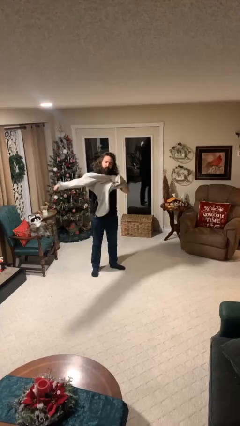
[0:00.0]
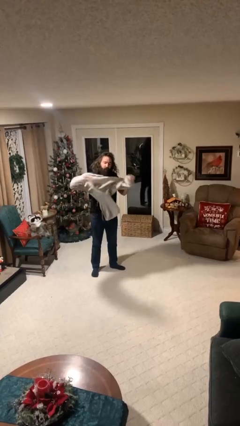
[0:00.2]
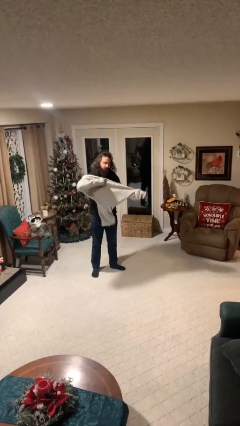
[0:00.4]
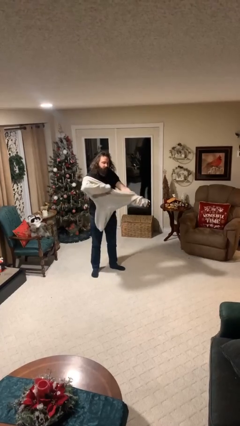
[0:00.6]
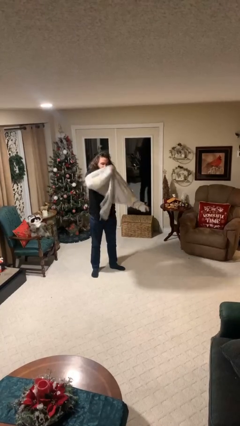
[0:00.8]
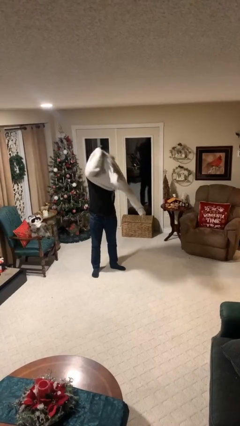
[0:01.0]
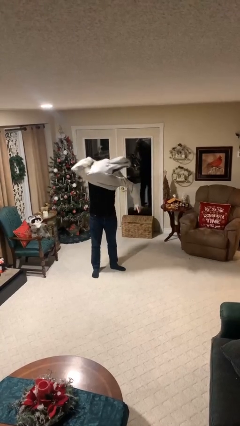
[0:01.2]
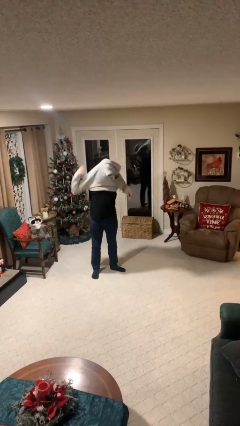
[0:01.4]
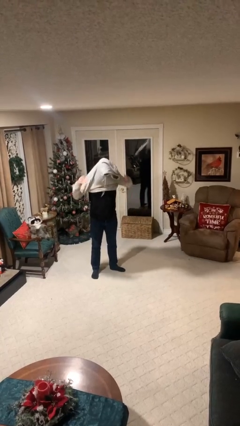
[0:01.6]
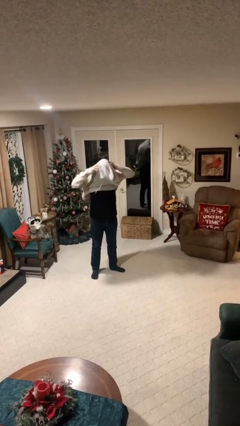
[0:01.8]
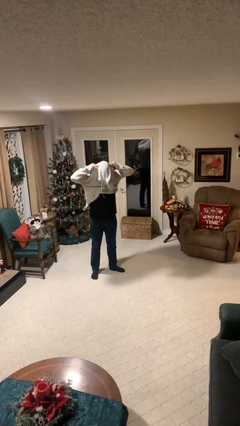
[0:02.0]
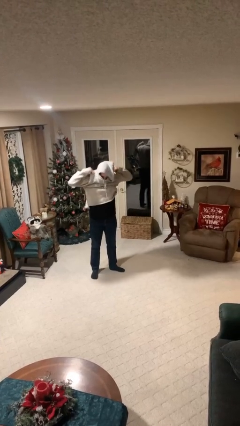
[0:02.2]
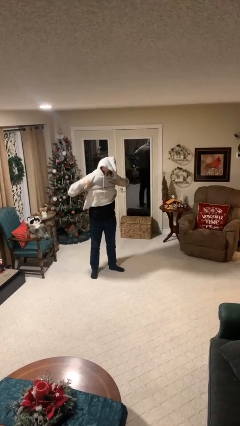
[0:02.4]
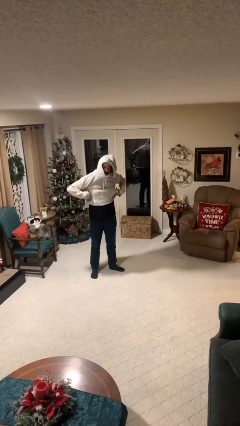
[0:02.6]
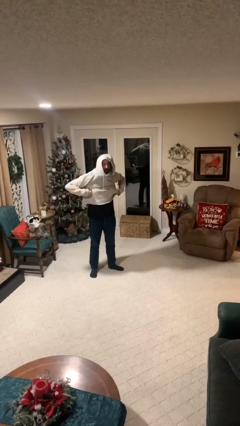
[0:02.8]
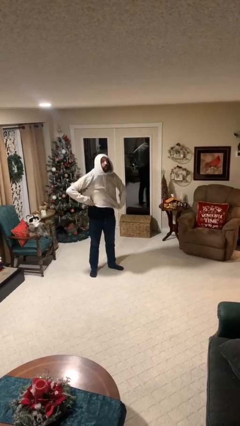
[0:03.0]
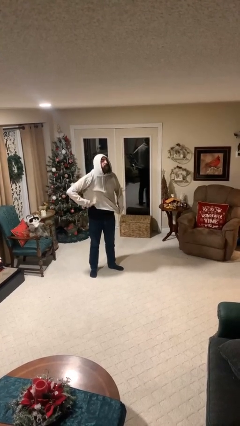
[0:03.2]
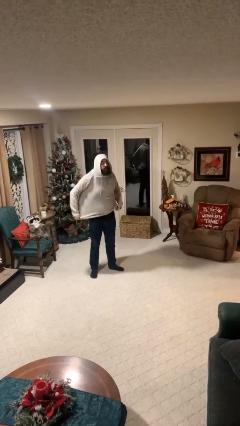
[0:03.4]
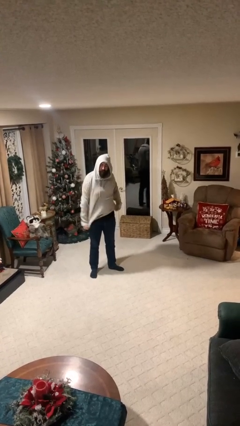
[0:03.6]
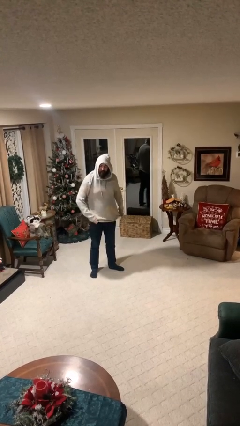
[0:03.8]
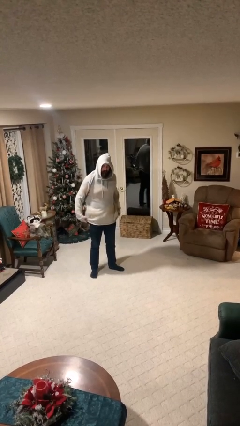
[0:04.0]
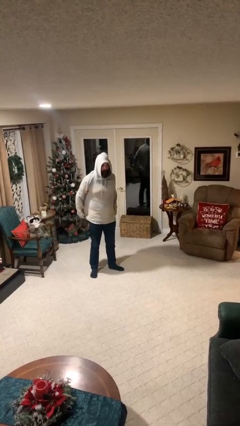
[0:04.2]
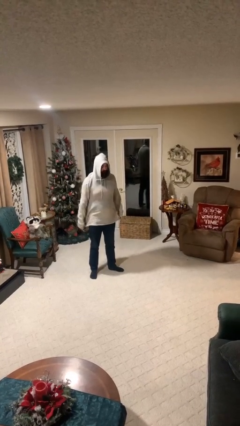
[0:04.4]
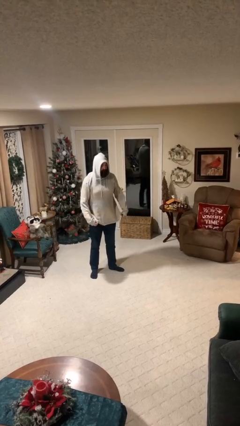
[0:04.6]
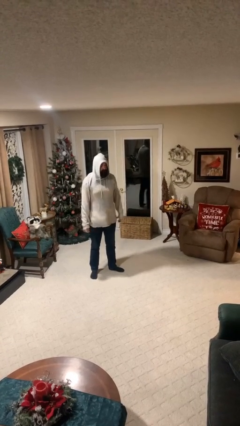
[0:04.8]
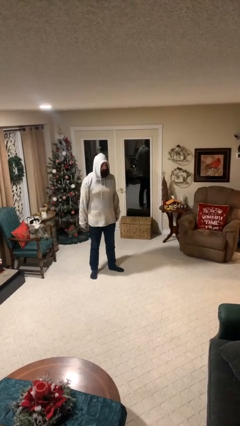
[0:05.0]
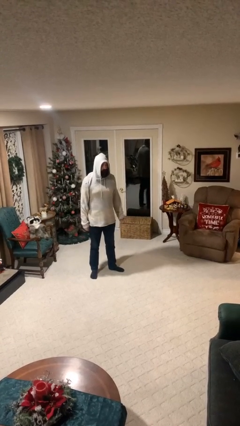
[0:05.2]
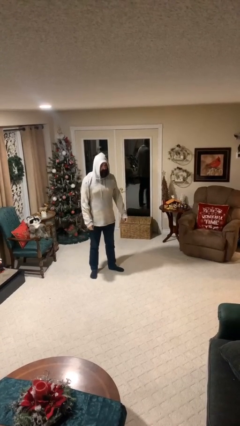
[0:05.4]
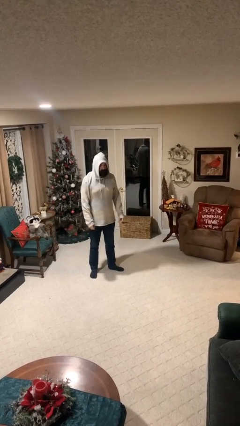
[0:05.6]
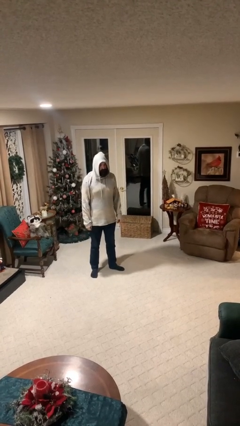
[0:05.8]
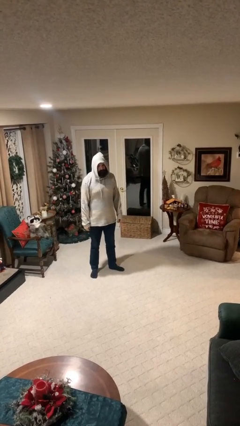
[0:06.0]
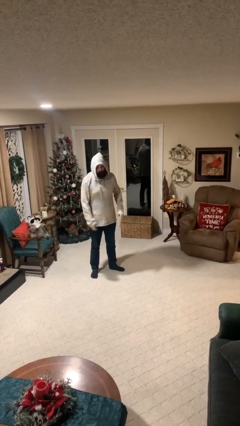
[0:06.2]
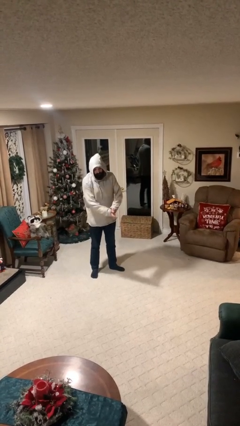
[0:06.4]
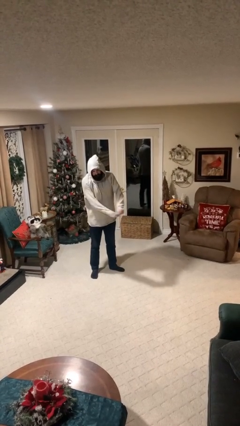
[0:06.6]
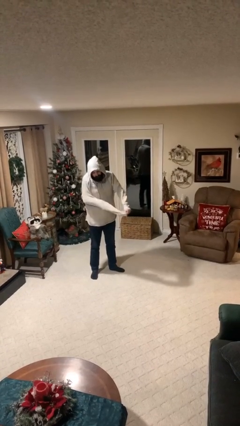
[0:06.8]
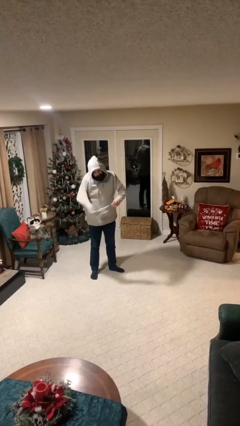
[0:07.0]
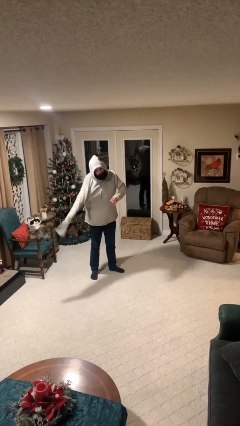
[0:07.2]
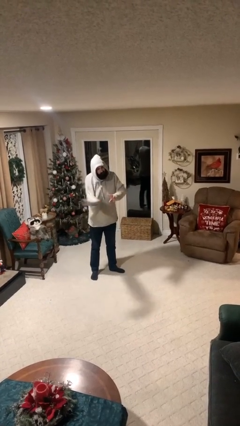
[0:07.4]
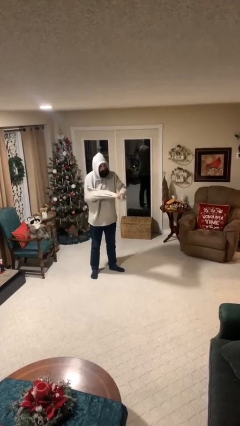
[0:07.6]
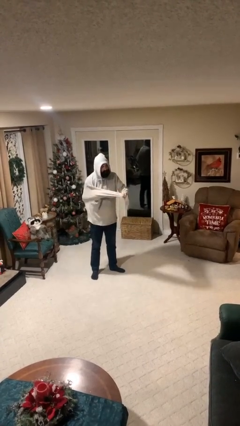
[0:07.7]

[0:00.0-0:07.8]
person puts on hoodie

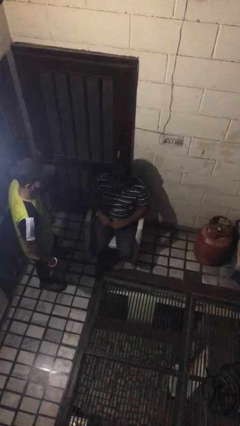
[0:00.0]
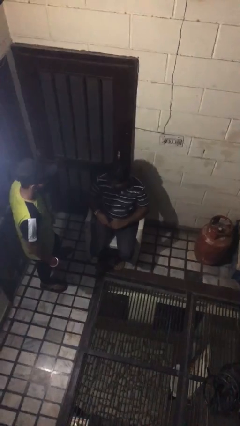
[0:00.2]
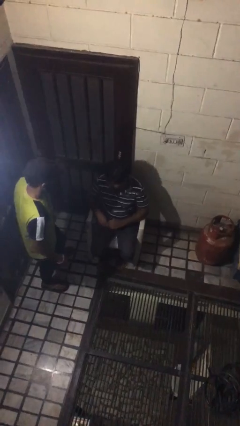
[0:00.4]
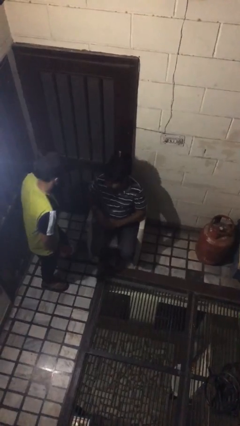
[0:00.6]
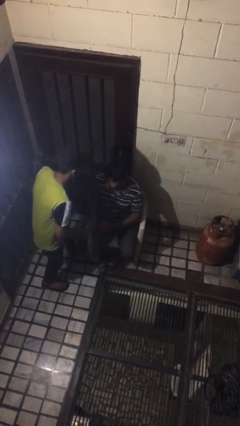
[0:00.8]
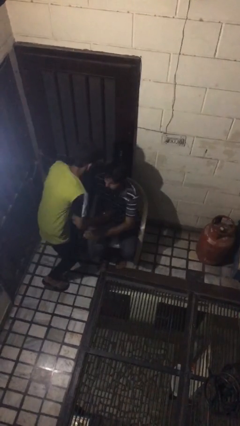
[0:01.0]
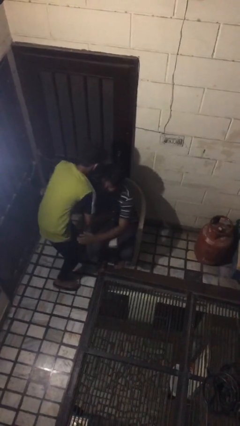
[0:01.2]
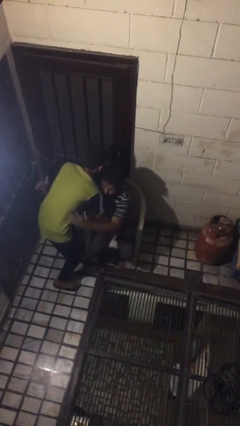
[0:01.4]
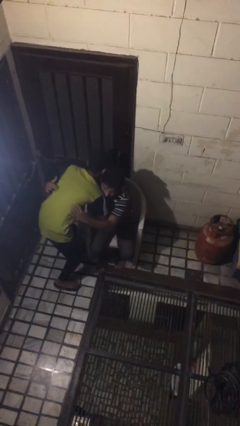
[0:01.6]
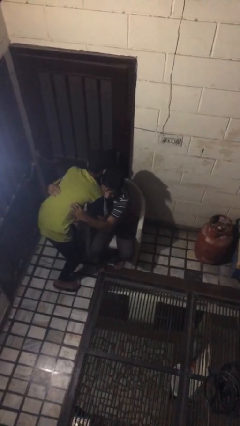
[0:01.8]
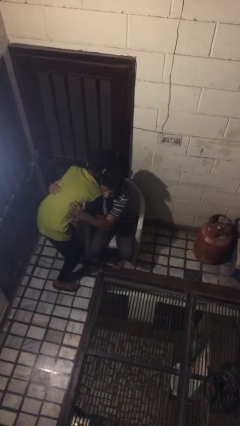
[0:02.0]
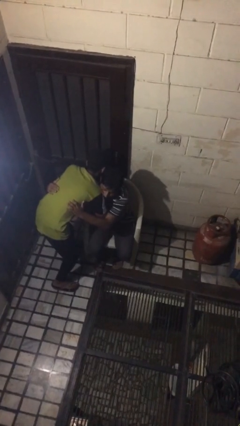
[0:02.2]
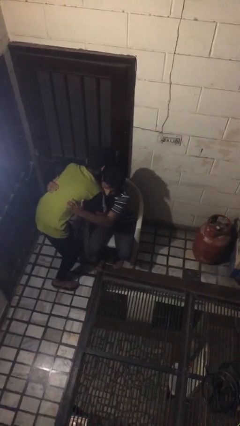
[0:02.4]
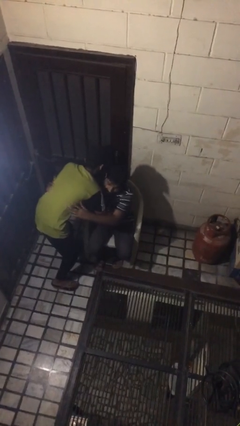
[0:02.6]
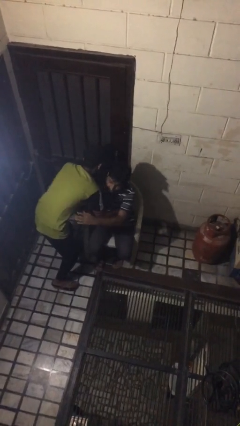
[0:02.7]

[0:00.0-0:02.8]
person embraces person

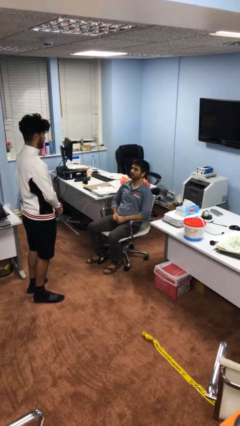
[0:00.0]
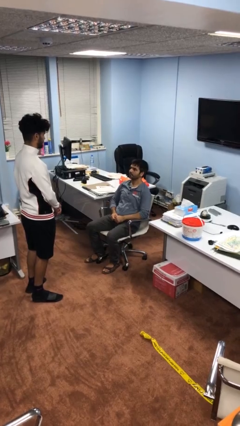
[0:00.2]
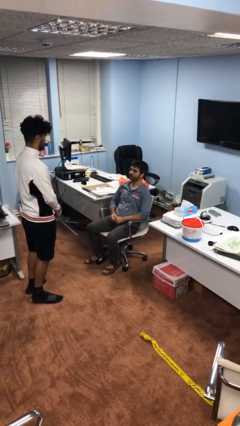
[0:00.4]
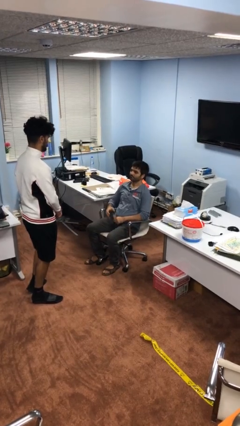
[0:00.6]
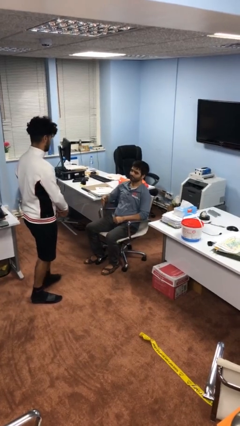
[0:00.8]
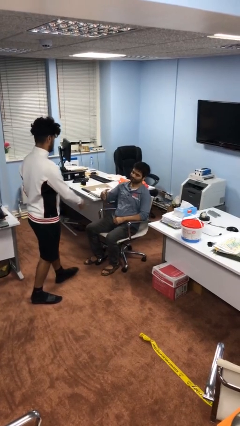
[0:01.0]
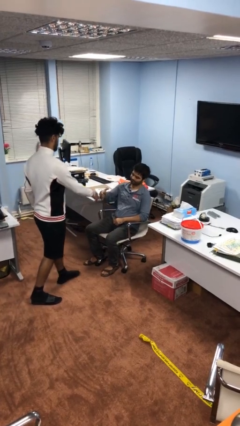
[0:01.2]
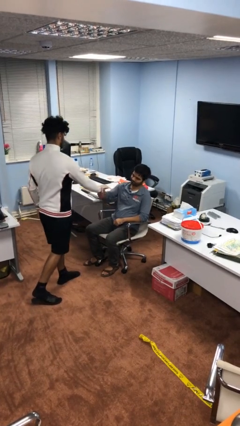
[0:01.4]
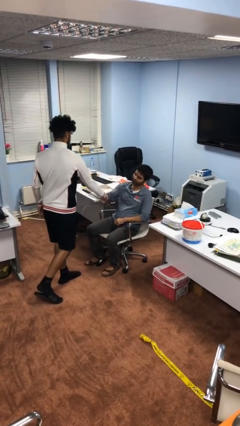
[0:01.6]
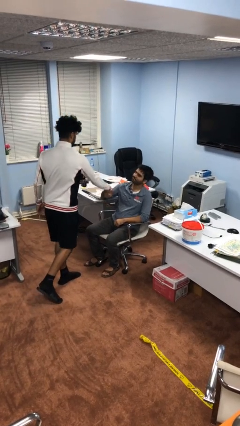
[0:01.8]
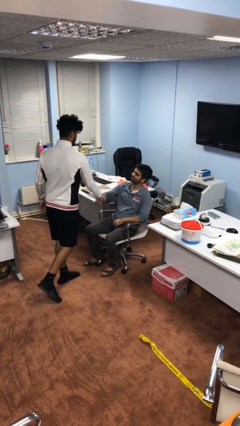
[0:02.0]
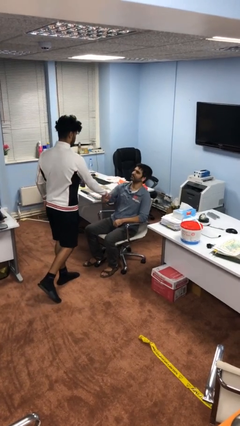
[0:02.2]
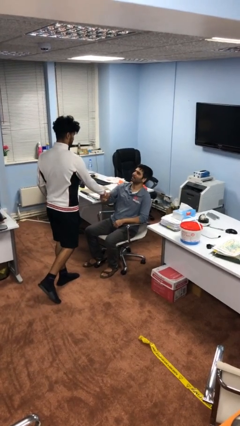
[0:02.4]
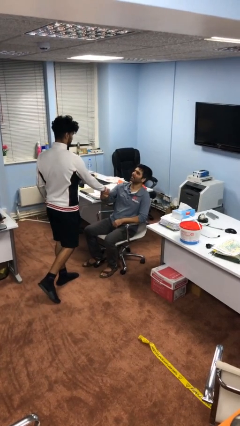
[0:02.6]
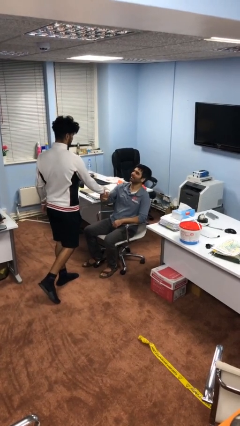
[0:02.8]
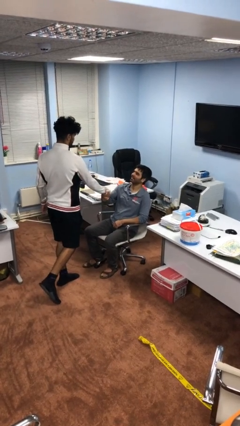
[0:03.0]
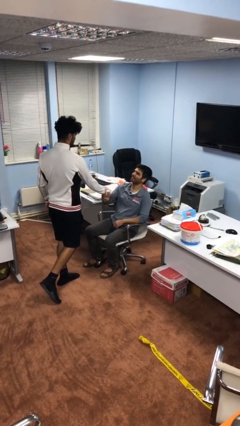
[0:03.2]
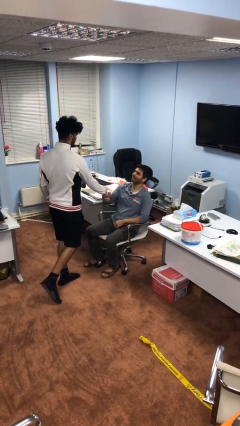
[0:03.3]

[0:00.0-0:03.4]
person shakes hand

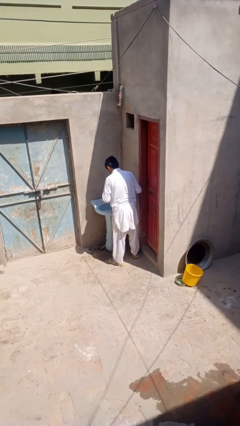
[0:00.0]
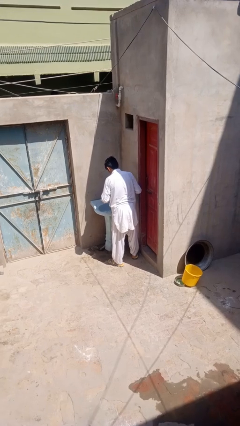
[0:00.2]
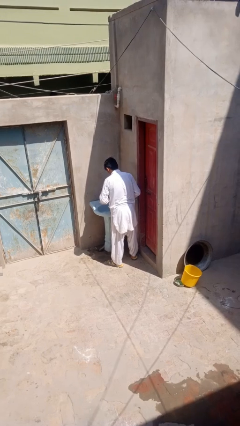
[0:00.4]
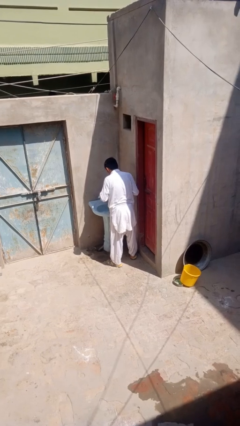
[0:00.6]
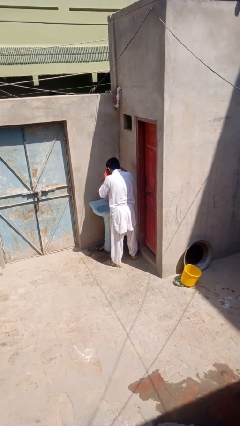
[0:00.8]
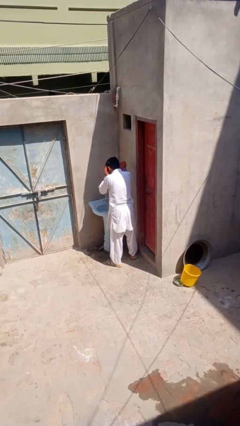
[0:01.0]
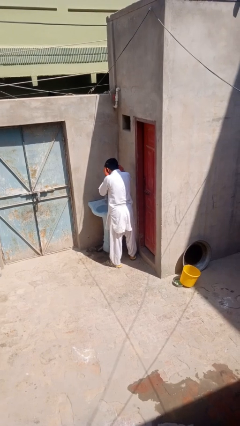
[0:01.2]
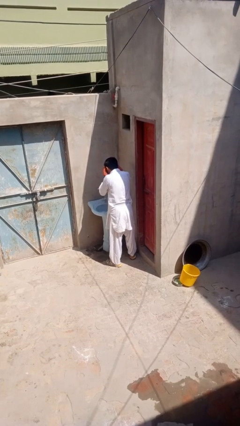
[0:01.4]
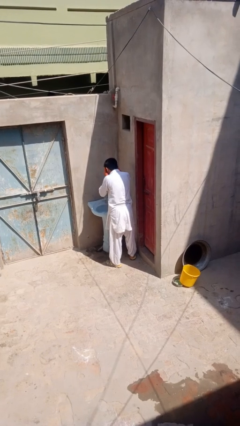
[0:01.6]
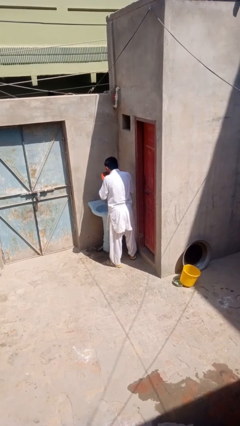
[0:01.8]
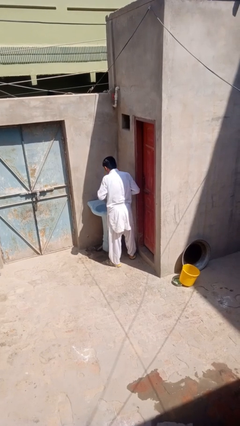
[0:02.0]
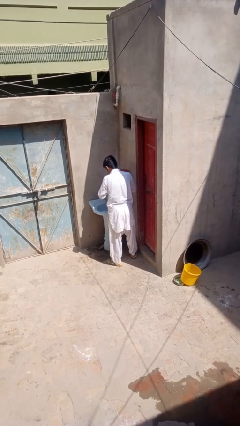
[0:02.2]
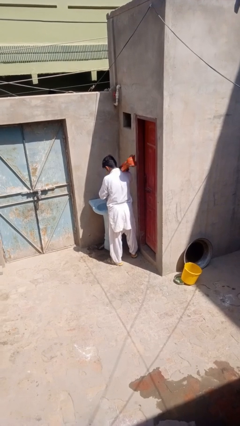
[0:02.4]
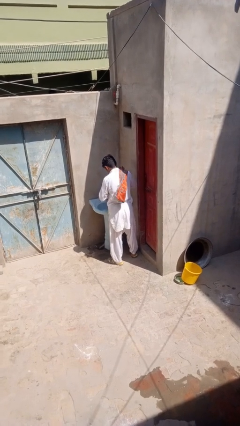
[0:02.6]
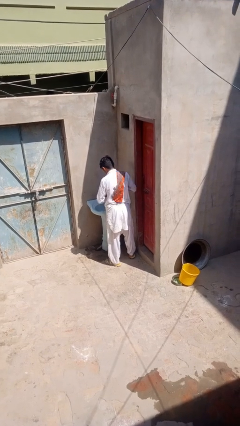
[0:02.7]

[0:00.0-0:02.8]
person dries face with towel

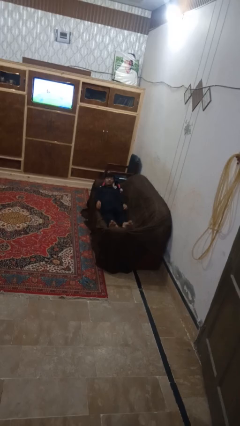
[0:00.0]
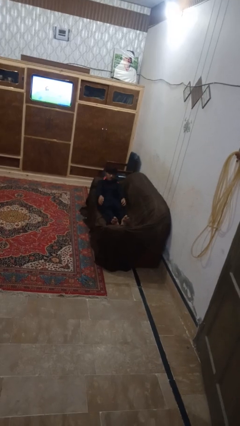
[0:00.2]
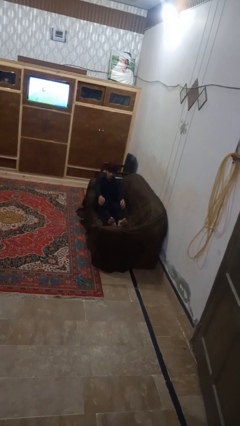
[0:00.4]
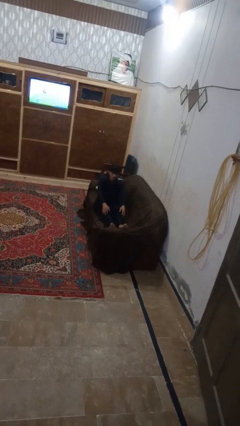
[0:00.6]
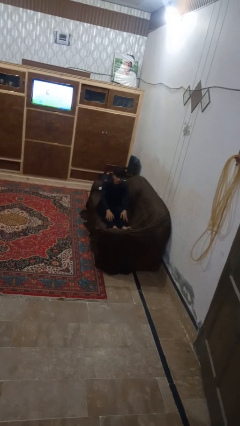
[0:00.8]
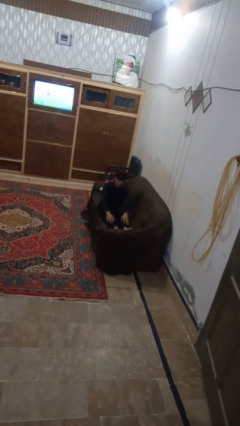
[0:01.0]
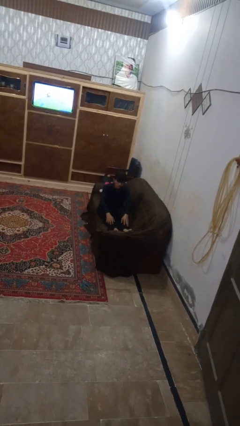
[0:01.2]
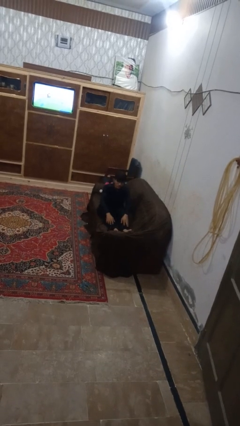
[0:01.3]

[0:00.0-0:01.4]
person stands up
